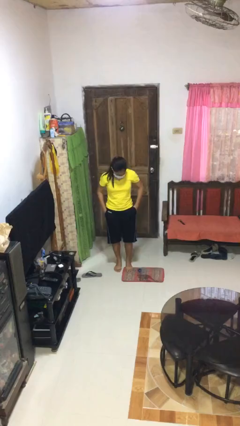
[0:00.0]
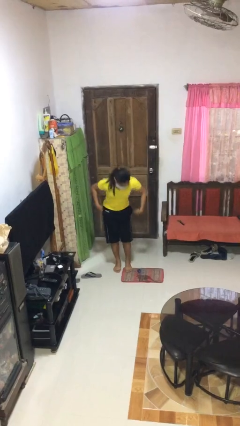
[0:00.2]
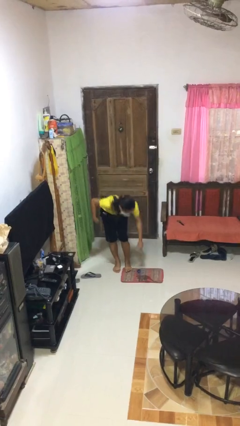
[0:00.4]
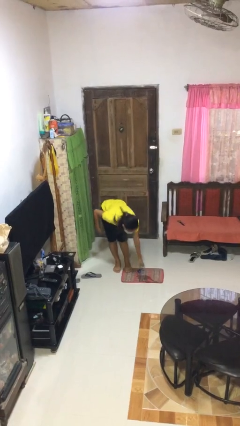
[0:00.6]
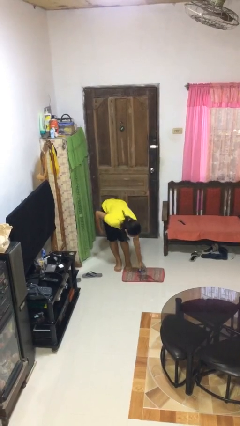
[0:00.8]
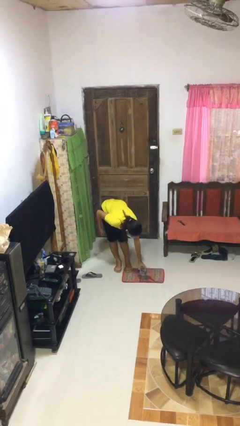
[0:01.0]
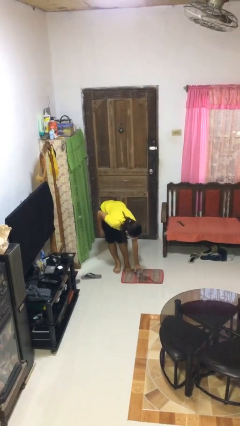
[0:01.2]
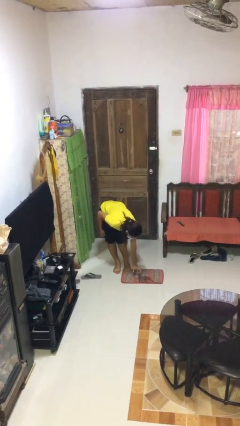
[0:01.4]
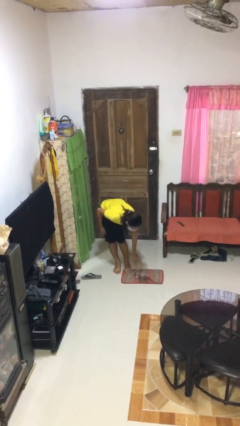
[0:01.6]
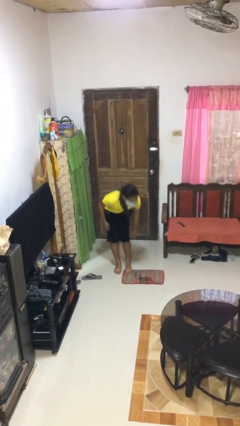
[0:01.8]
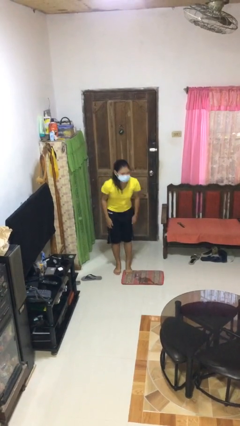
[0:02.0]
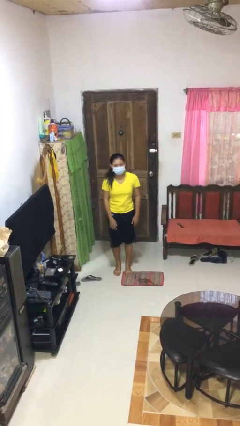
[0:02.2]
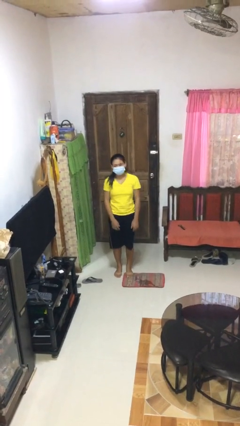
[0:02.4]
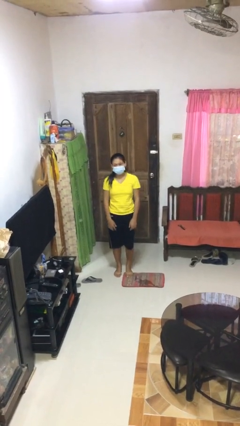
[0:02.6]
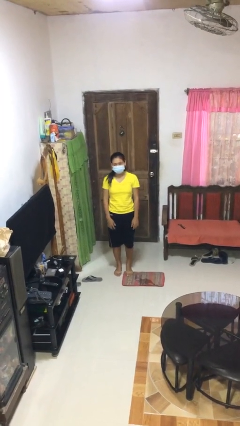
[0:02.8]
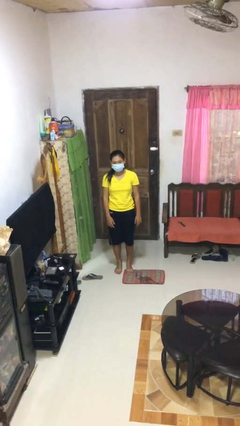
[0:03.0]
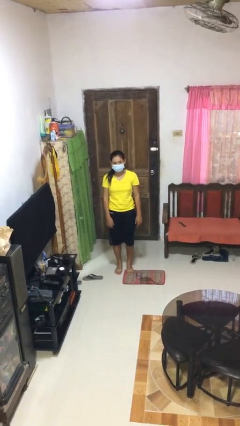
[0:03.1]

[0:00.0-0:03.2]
person sets upright glass

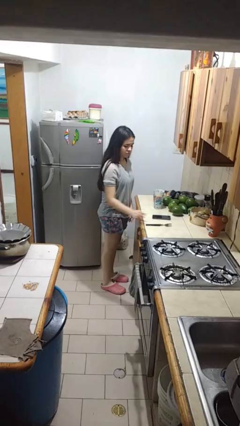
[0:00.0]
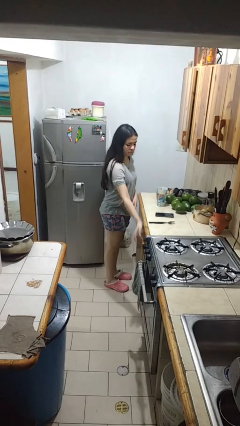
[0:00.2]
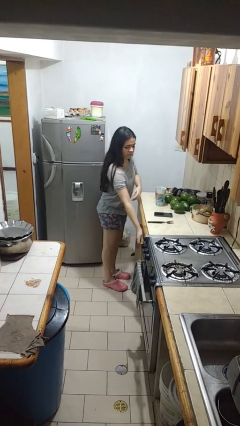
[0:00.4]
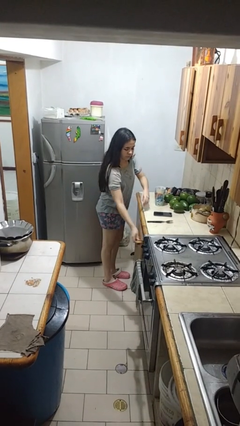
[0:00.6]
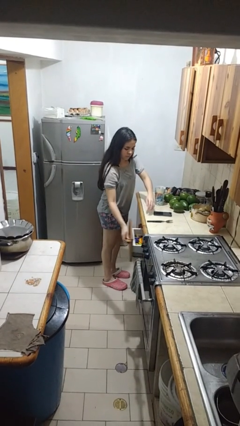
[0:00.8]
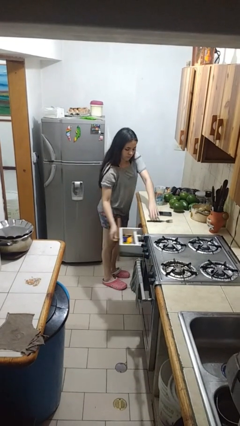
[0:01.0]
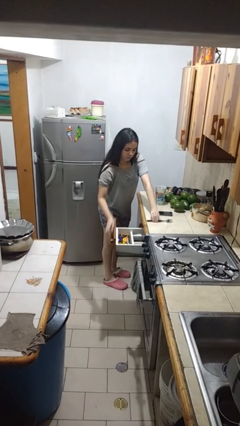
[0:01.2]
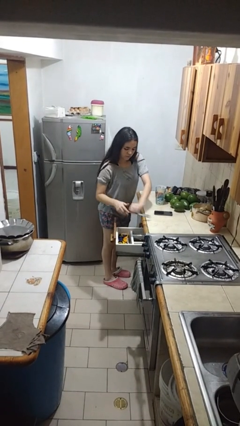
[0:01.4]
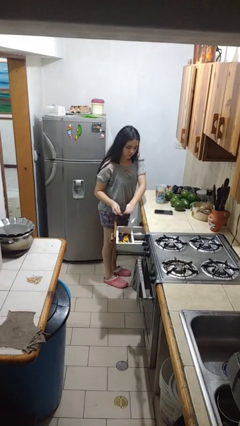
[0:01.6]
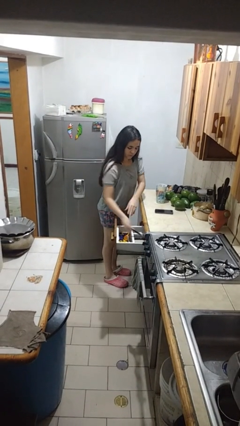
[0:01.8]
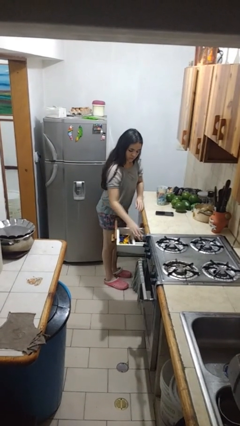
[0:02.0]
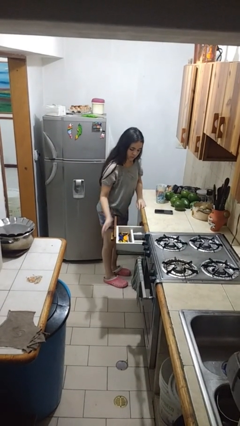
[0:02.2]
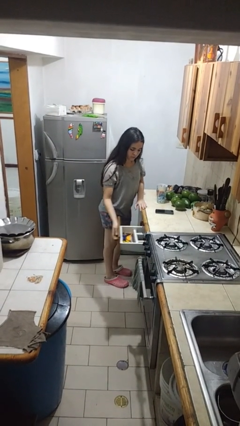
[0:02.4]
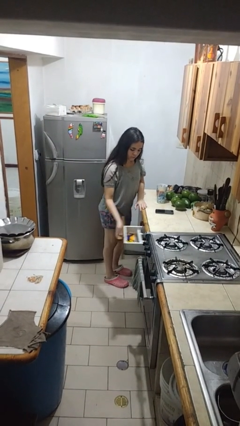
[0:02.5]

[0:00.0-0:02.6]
person puts object into kitchen drawer

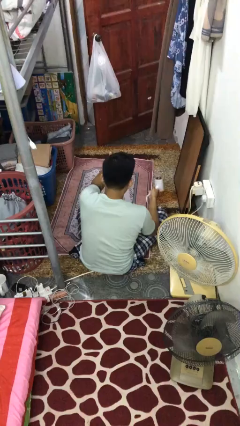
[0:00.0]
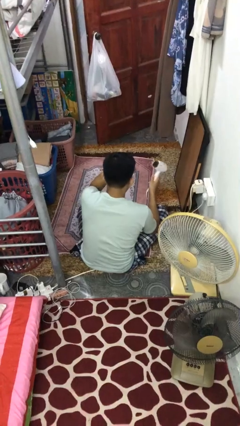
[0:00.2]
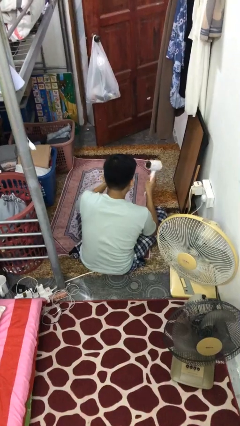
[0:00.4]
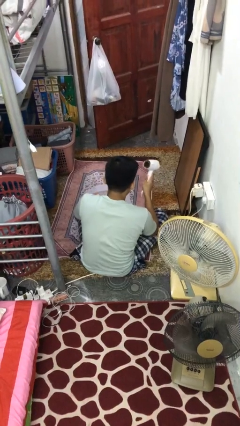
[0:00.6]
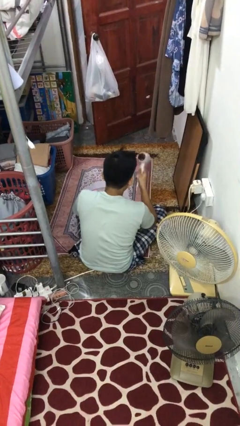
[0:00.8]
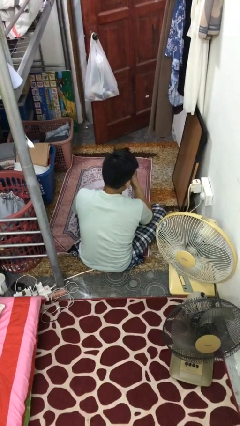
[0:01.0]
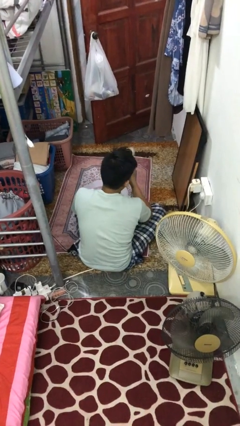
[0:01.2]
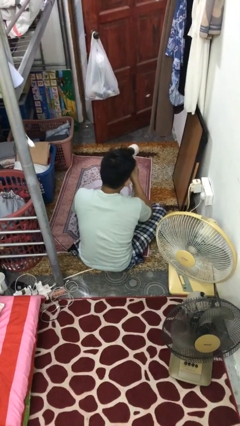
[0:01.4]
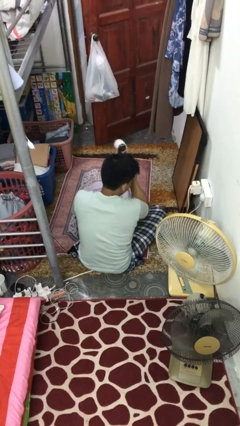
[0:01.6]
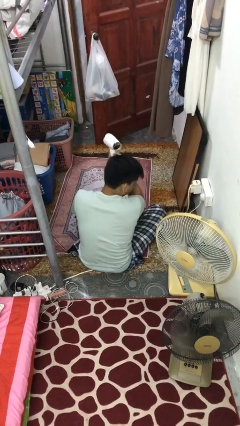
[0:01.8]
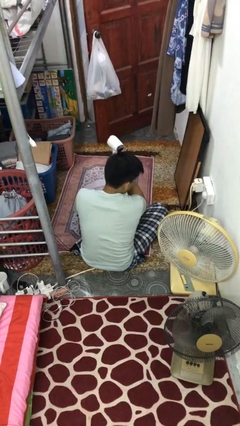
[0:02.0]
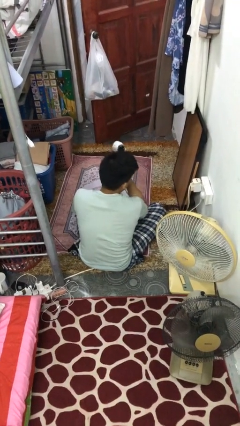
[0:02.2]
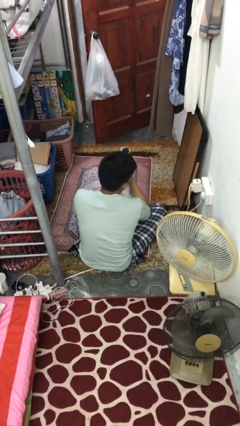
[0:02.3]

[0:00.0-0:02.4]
person dries hair with hairdryer

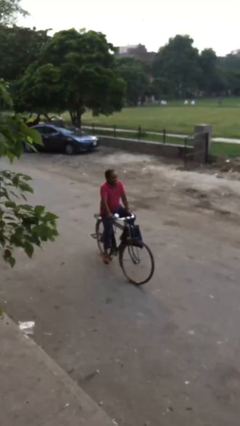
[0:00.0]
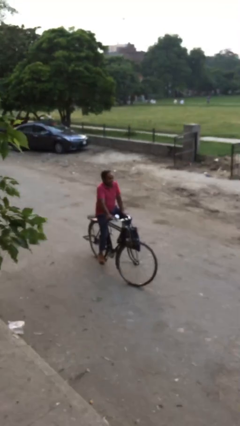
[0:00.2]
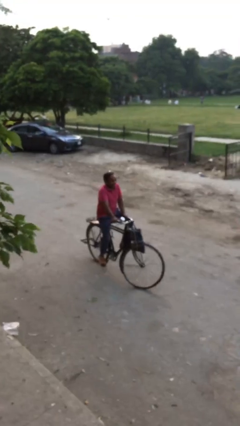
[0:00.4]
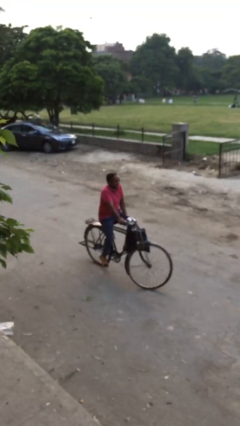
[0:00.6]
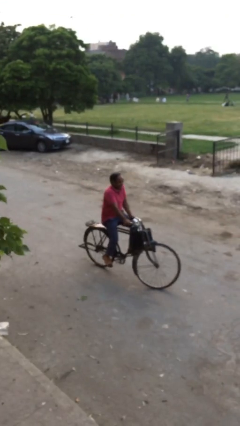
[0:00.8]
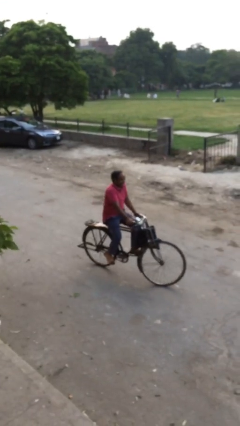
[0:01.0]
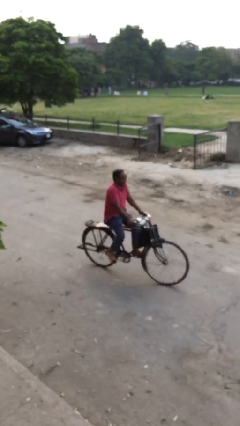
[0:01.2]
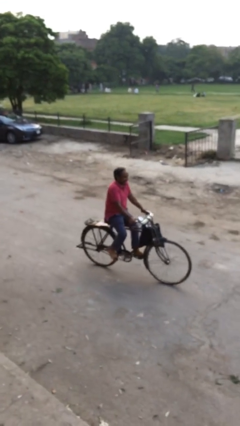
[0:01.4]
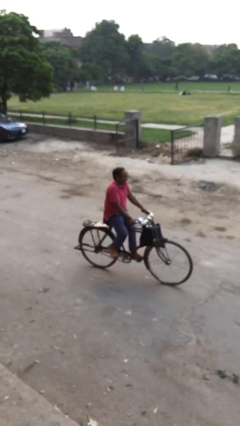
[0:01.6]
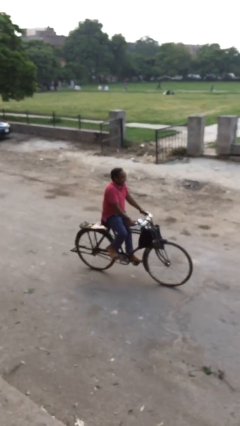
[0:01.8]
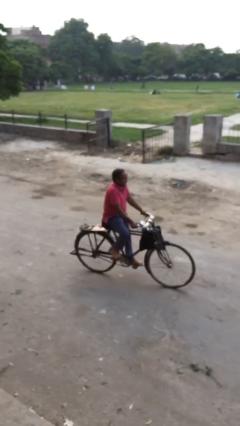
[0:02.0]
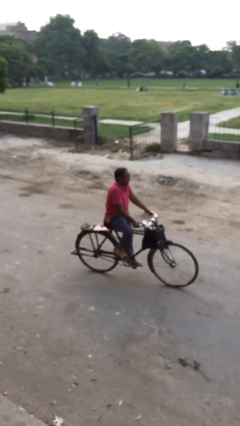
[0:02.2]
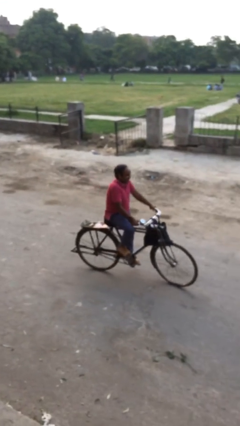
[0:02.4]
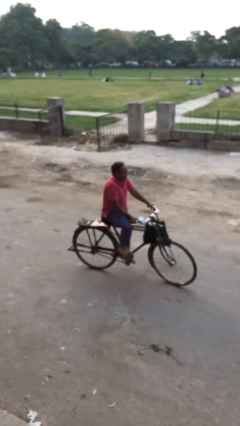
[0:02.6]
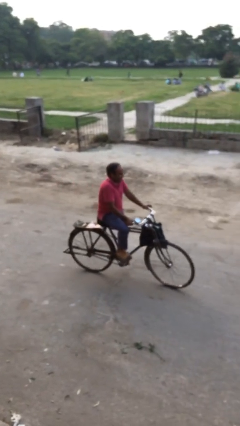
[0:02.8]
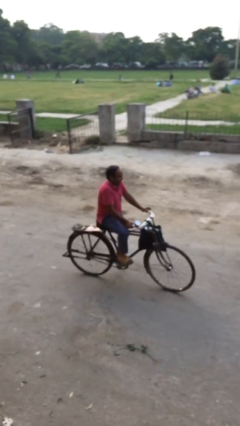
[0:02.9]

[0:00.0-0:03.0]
person rides bicycle

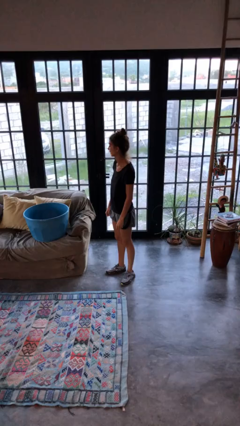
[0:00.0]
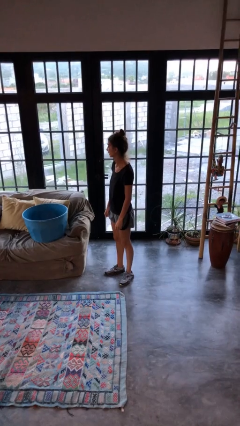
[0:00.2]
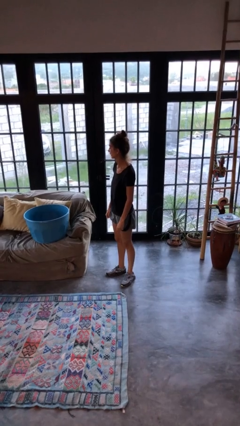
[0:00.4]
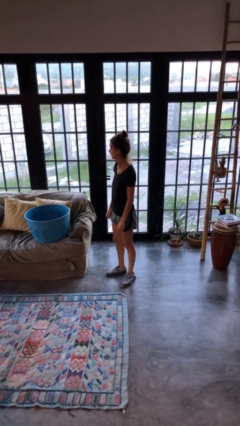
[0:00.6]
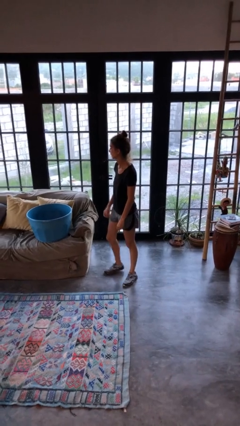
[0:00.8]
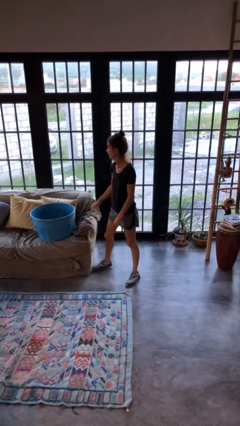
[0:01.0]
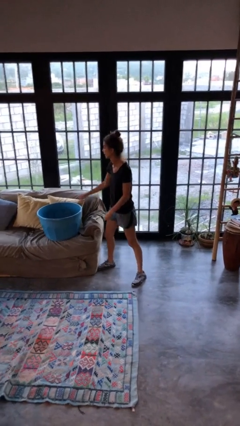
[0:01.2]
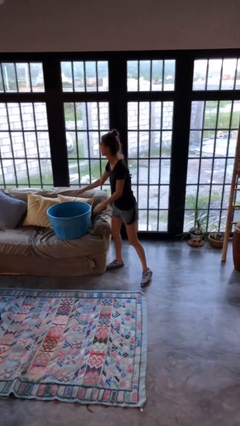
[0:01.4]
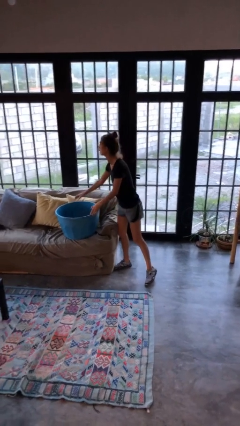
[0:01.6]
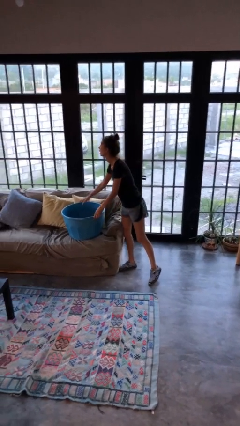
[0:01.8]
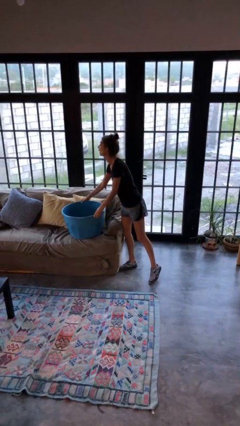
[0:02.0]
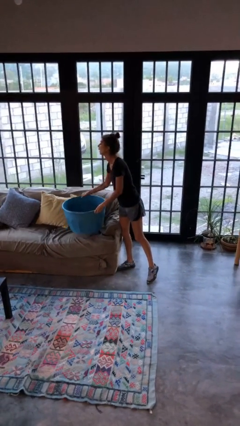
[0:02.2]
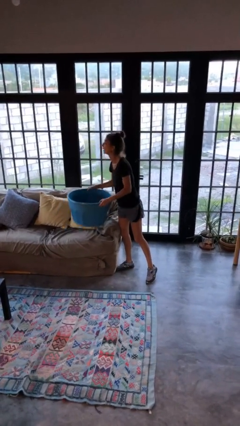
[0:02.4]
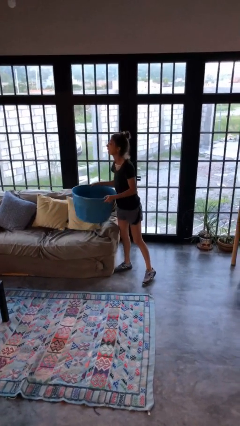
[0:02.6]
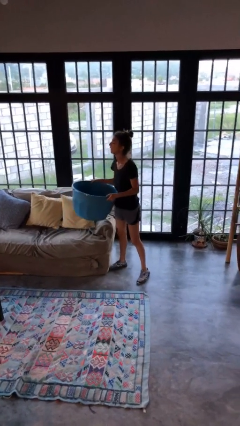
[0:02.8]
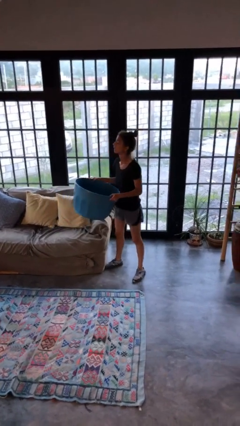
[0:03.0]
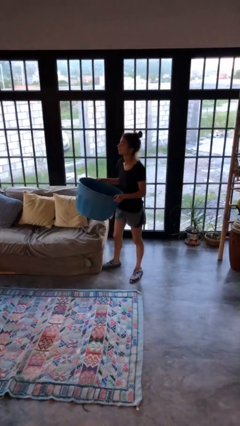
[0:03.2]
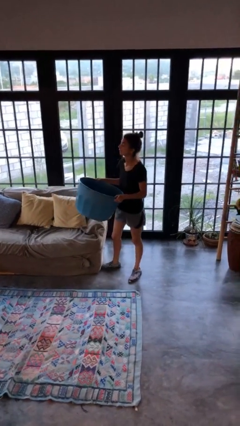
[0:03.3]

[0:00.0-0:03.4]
person picks up object from couch

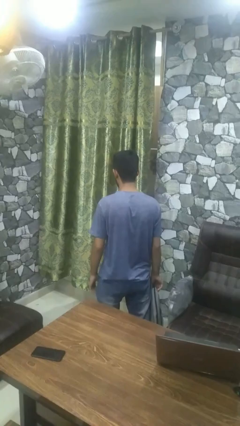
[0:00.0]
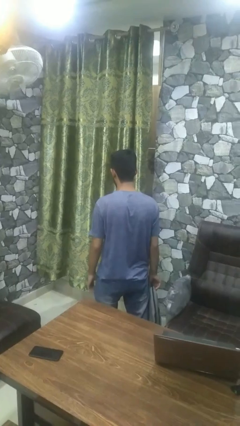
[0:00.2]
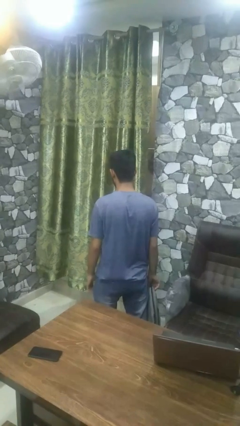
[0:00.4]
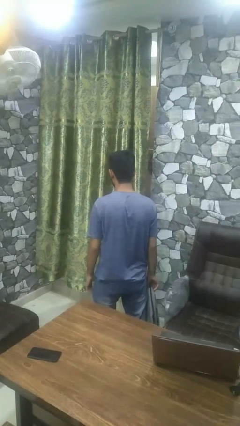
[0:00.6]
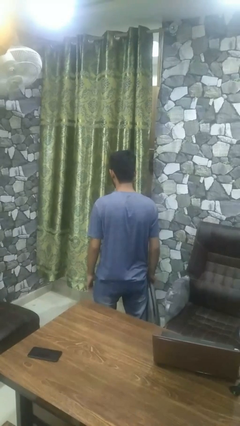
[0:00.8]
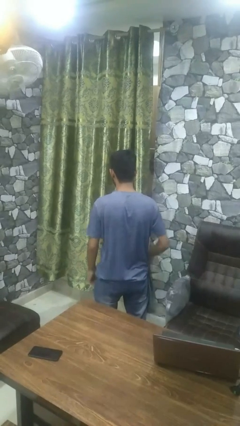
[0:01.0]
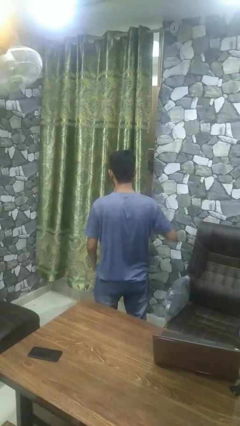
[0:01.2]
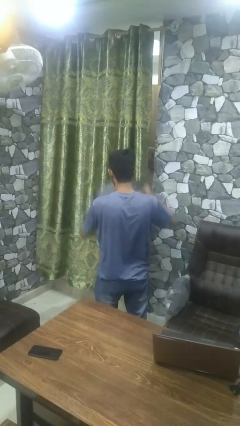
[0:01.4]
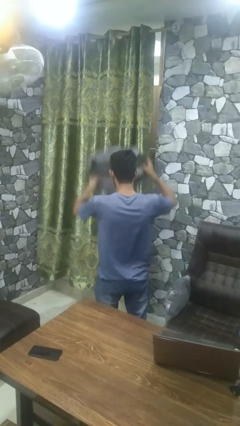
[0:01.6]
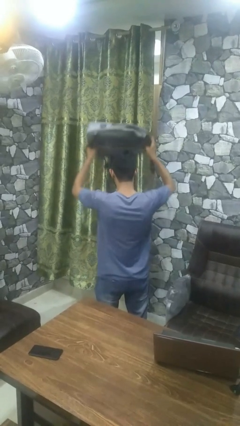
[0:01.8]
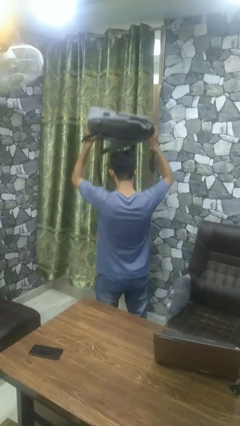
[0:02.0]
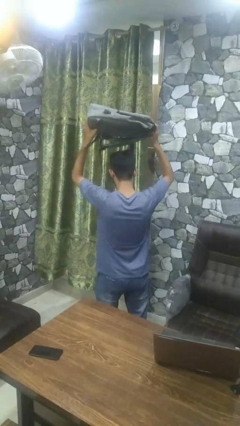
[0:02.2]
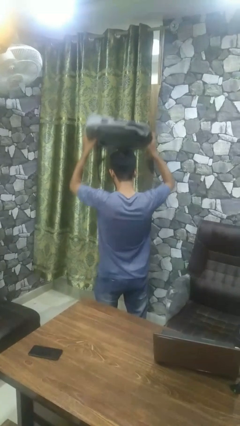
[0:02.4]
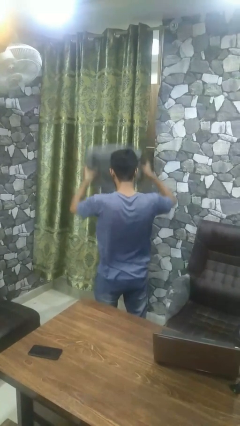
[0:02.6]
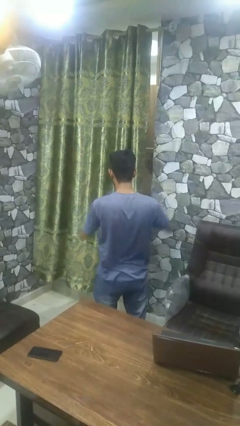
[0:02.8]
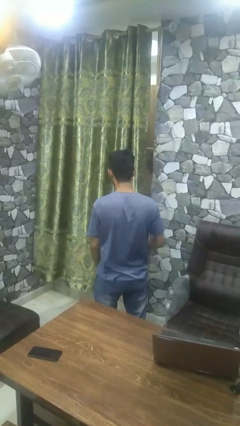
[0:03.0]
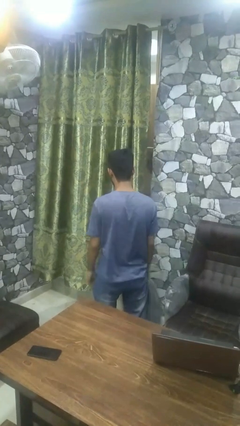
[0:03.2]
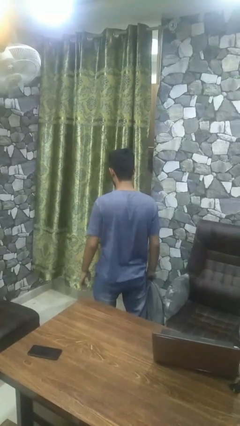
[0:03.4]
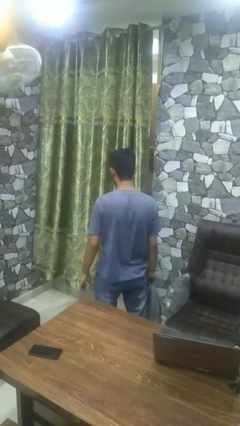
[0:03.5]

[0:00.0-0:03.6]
person holds object above head
